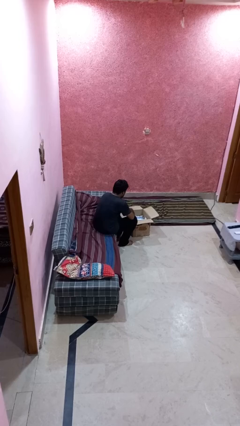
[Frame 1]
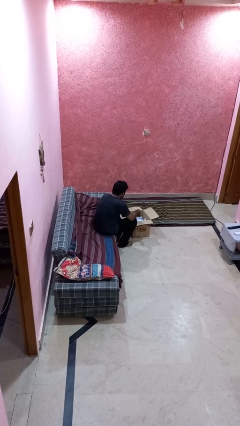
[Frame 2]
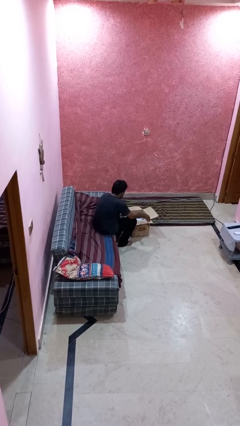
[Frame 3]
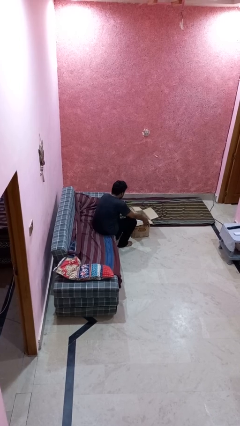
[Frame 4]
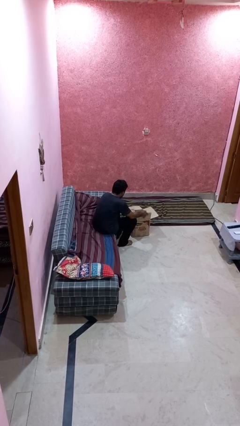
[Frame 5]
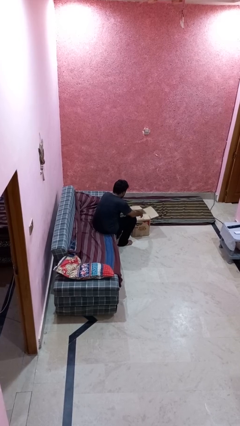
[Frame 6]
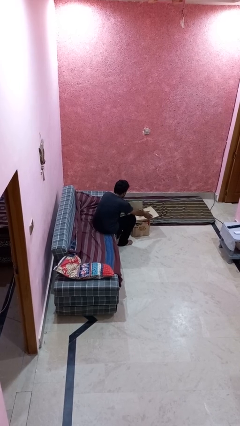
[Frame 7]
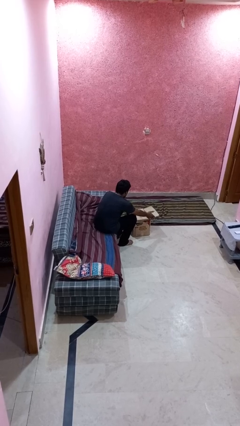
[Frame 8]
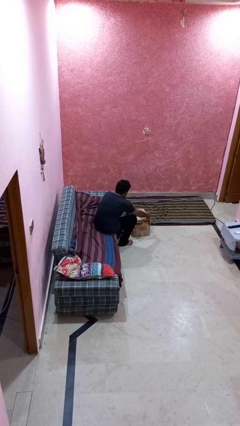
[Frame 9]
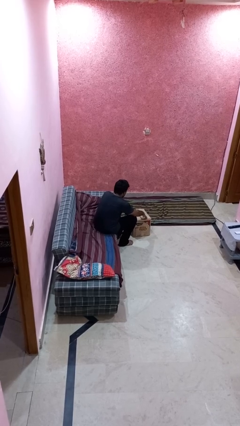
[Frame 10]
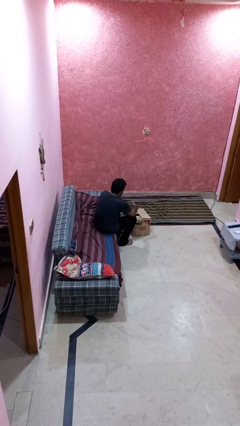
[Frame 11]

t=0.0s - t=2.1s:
person closes box

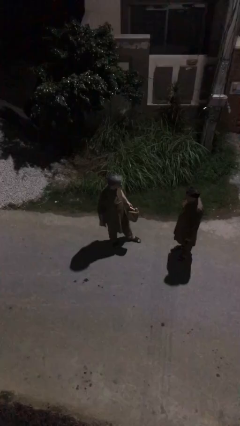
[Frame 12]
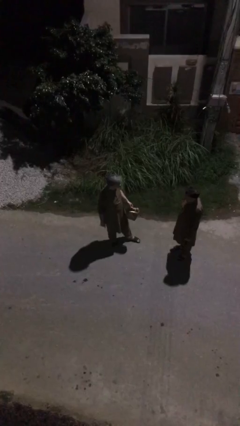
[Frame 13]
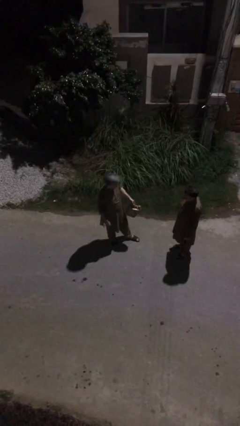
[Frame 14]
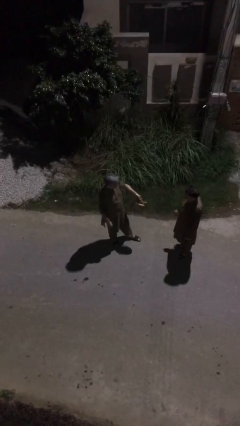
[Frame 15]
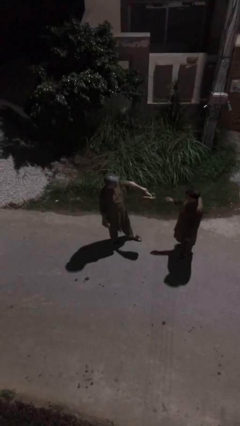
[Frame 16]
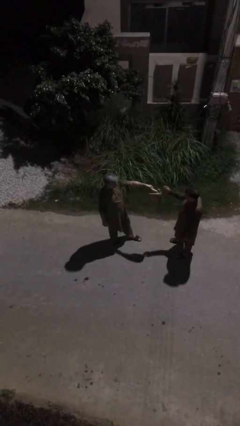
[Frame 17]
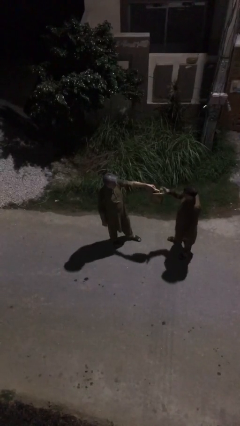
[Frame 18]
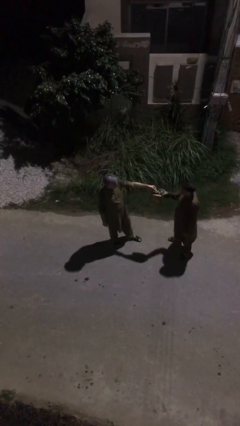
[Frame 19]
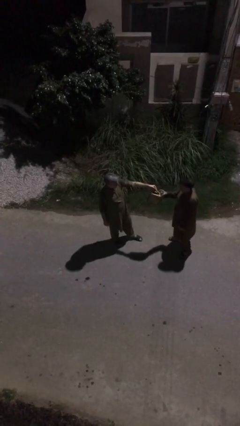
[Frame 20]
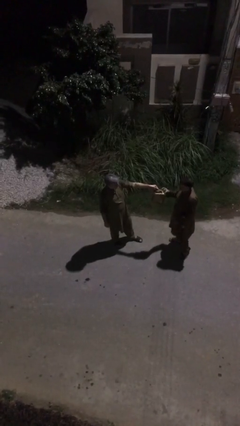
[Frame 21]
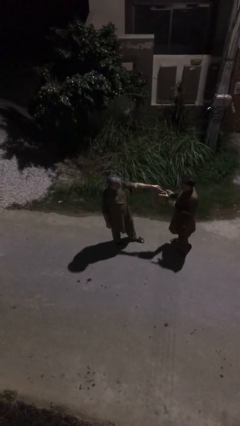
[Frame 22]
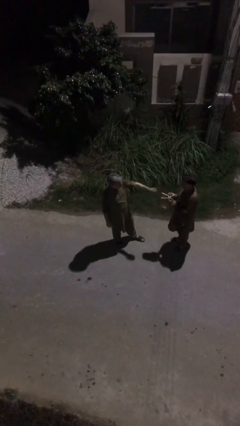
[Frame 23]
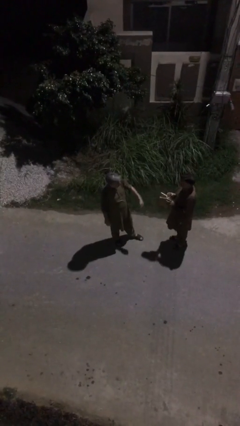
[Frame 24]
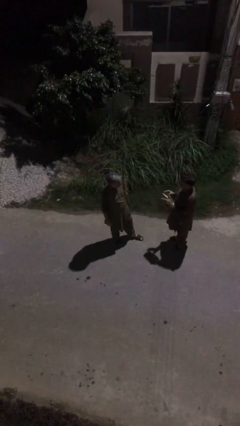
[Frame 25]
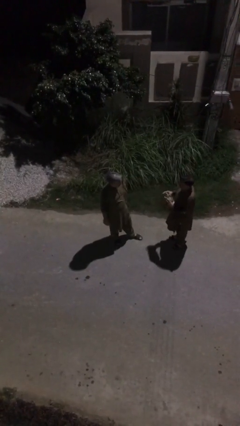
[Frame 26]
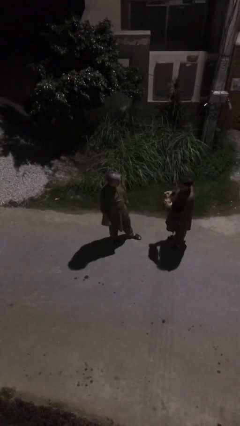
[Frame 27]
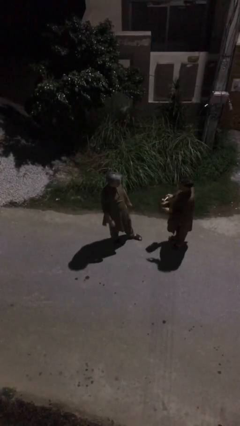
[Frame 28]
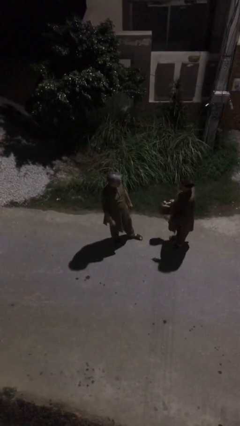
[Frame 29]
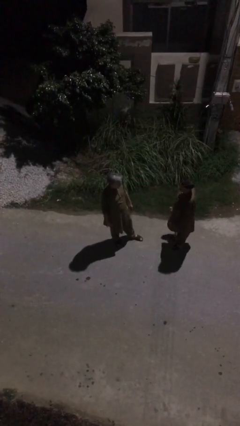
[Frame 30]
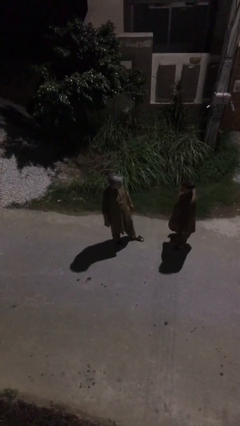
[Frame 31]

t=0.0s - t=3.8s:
person transfers object to person

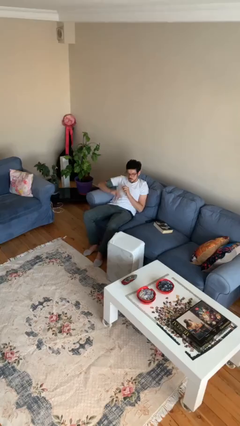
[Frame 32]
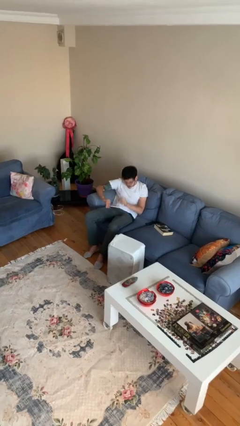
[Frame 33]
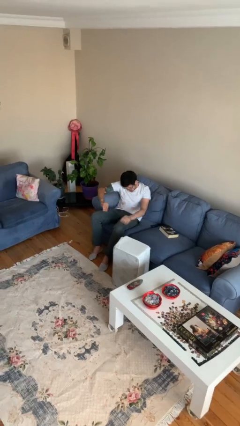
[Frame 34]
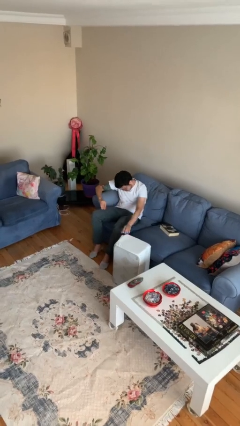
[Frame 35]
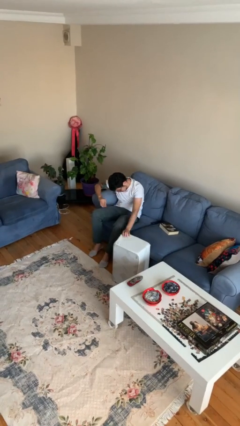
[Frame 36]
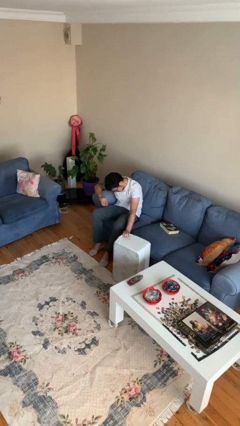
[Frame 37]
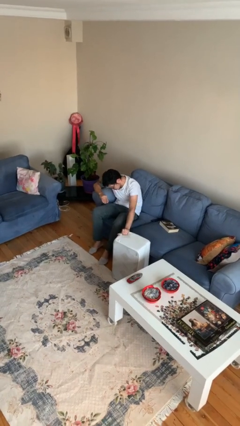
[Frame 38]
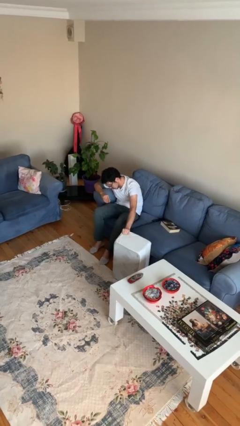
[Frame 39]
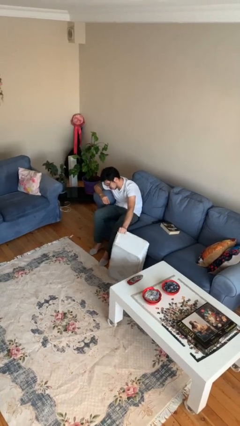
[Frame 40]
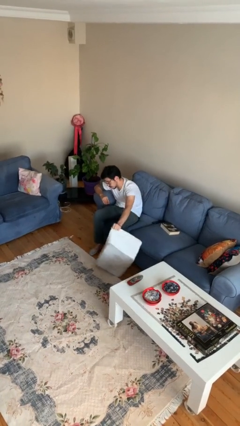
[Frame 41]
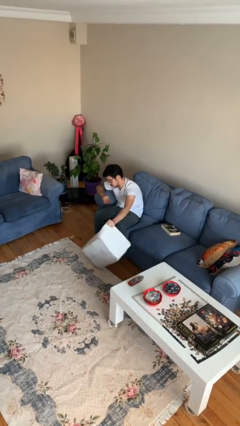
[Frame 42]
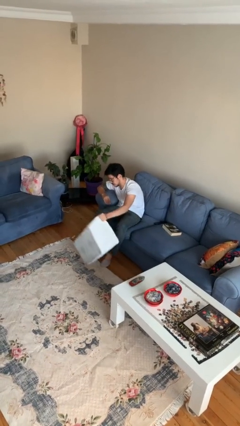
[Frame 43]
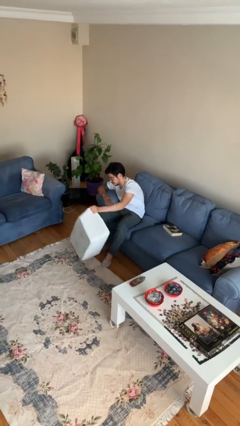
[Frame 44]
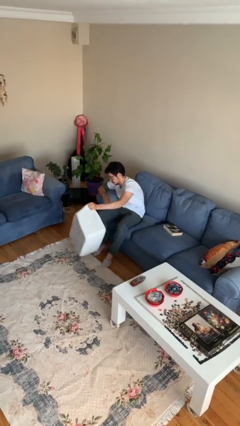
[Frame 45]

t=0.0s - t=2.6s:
person picks up object from floor

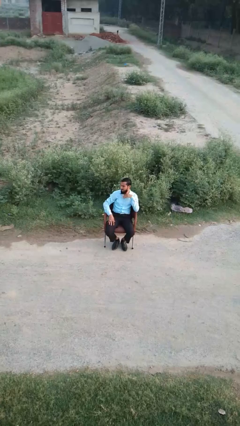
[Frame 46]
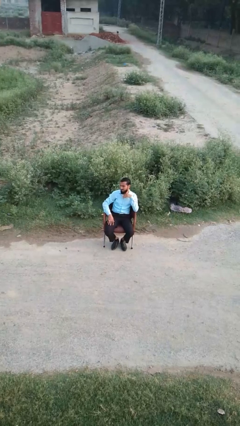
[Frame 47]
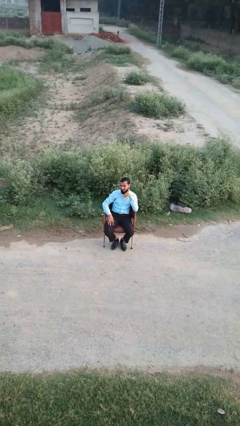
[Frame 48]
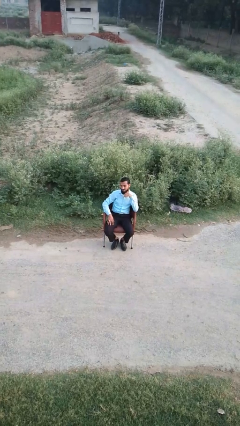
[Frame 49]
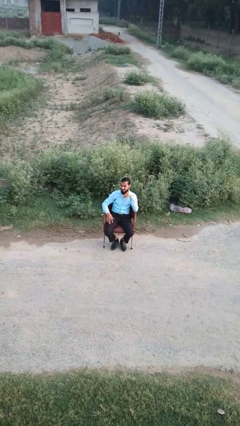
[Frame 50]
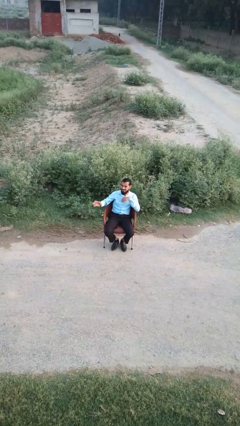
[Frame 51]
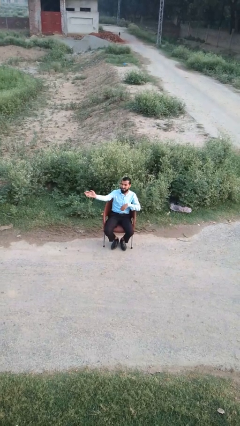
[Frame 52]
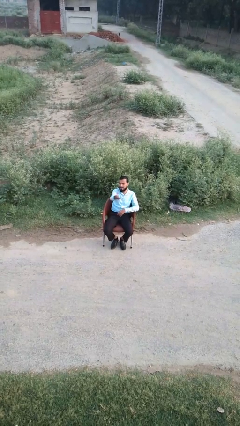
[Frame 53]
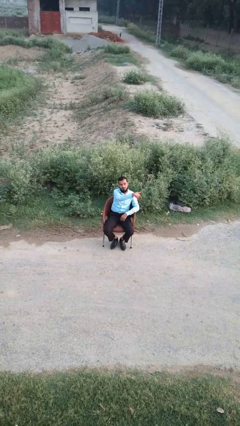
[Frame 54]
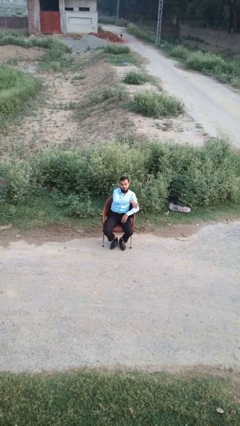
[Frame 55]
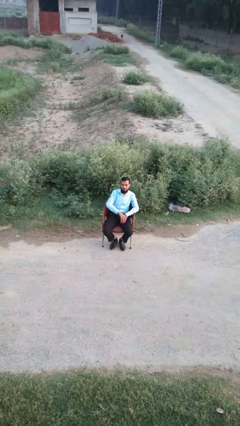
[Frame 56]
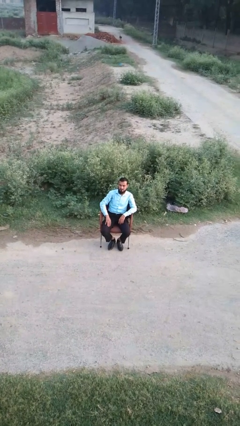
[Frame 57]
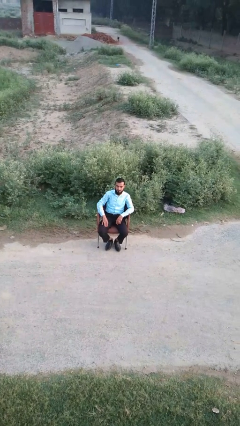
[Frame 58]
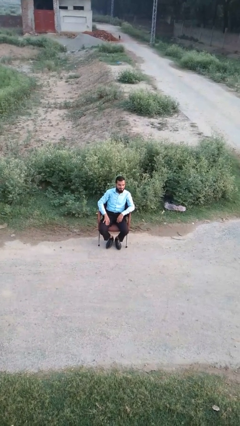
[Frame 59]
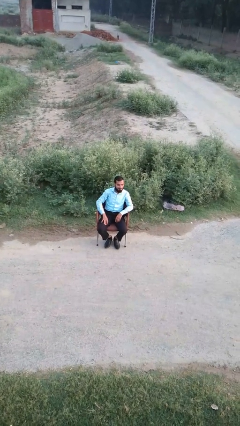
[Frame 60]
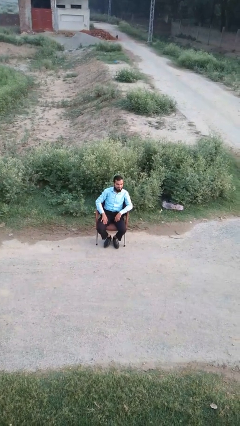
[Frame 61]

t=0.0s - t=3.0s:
person gestures swipe left

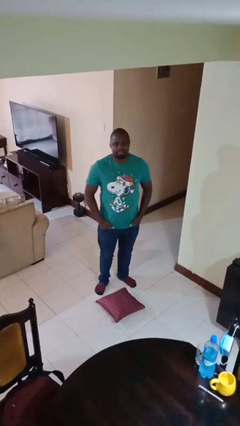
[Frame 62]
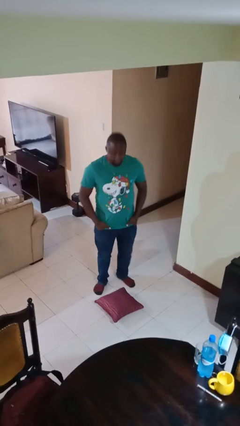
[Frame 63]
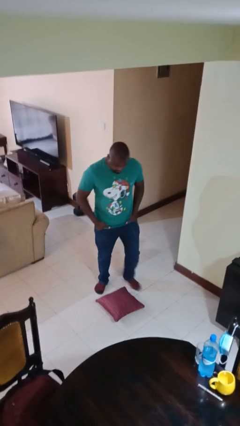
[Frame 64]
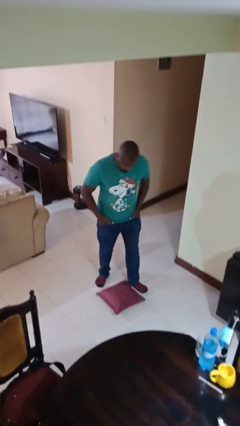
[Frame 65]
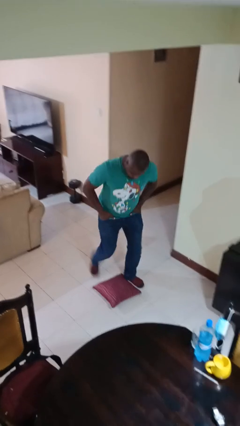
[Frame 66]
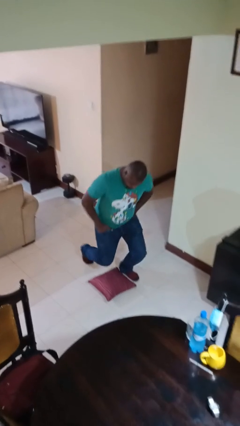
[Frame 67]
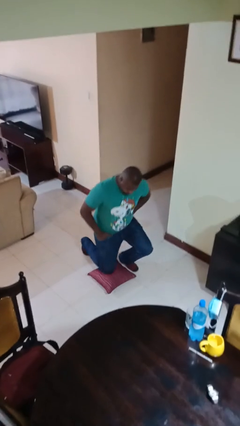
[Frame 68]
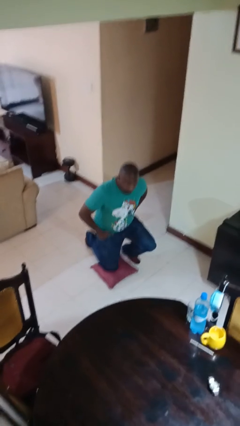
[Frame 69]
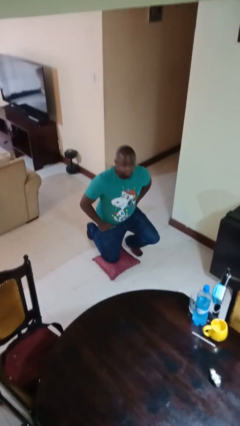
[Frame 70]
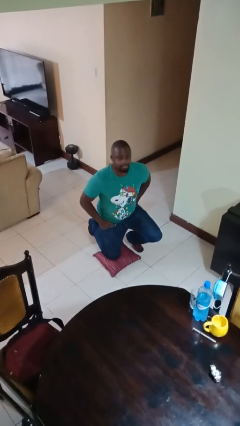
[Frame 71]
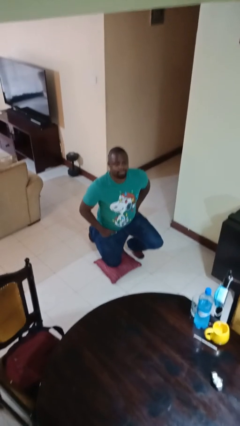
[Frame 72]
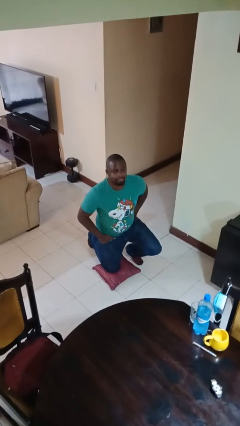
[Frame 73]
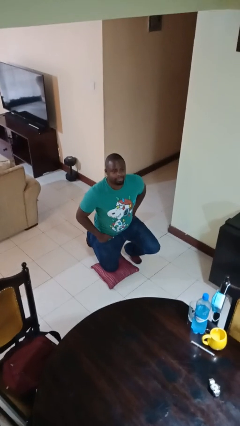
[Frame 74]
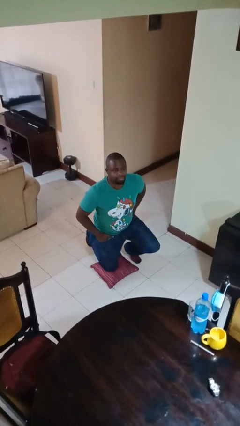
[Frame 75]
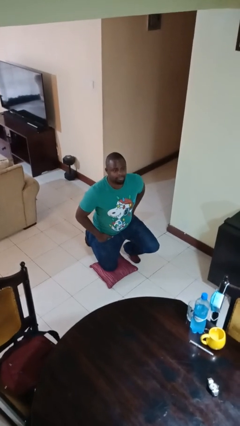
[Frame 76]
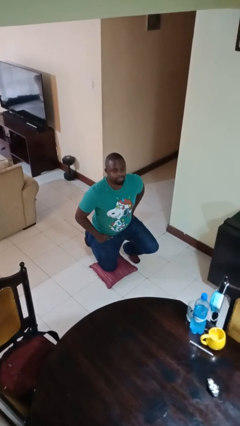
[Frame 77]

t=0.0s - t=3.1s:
person kneels

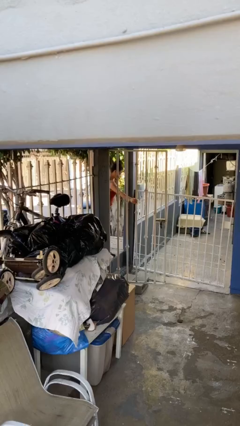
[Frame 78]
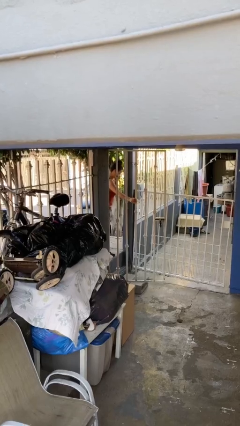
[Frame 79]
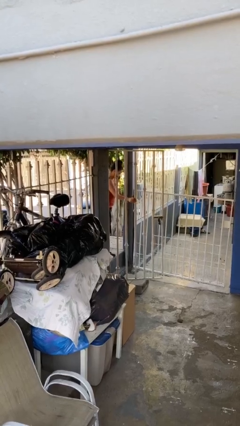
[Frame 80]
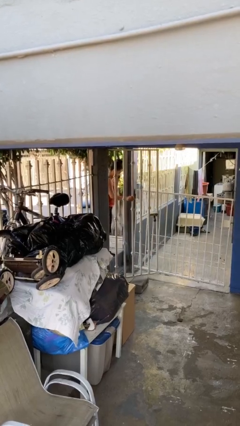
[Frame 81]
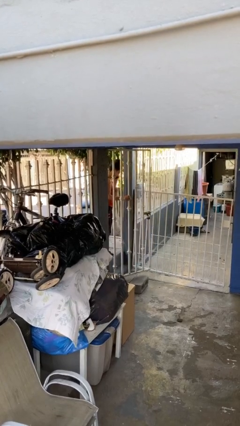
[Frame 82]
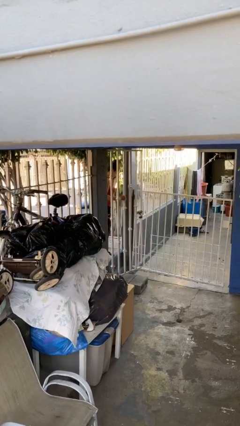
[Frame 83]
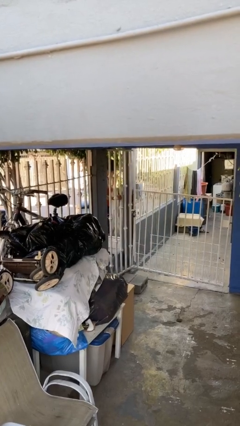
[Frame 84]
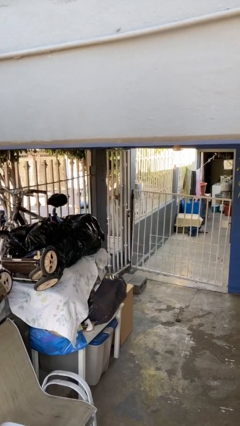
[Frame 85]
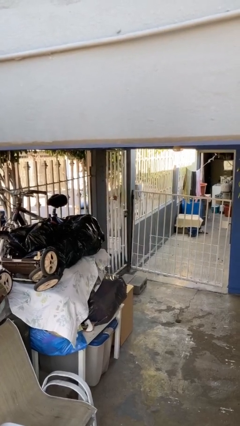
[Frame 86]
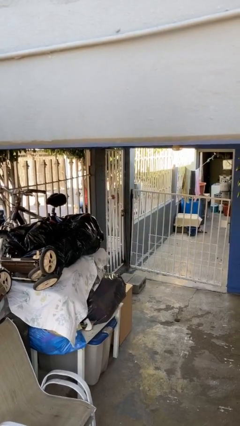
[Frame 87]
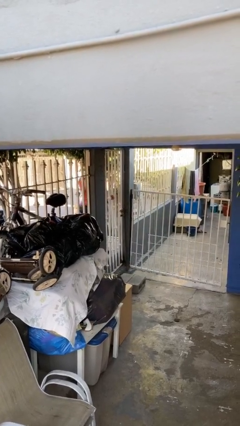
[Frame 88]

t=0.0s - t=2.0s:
person closes facility door

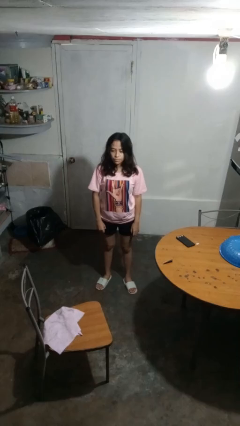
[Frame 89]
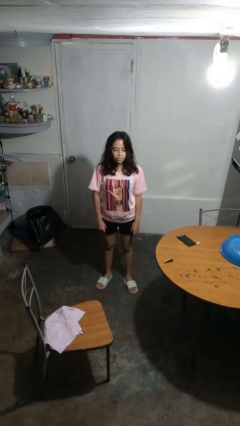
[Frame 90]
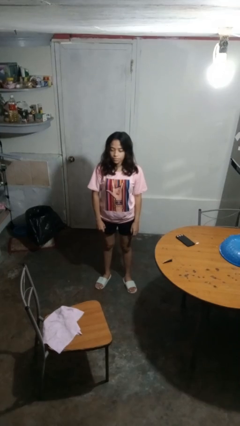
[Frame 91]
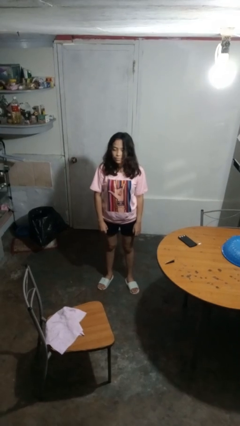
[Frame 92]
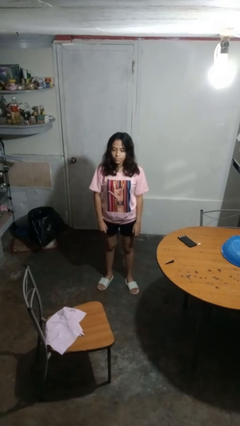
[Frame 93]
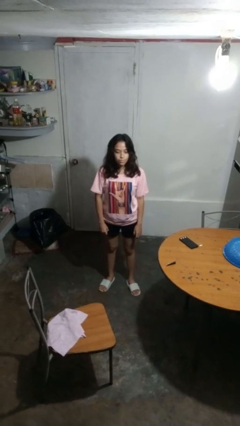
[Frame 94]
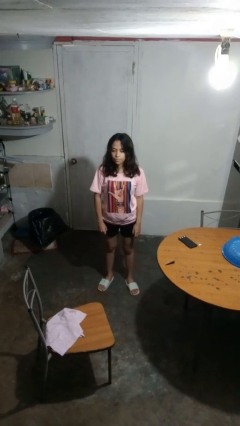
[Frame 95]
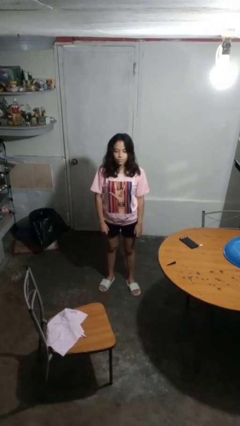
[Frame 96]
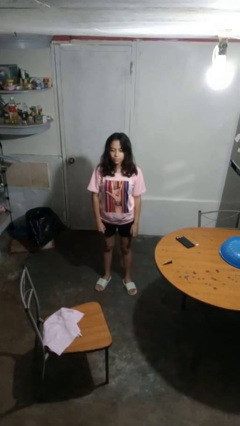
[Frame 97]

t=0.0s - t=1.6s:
person shakes head
